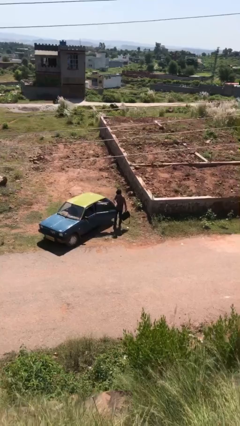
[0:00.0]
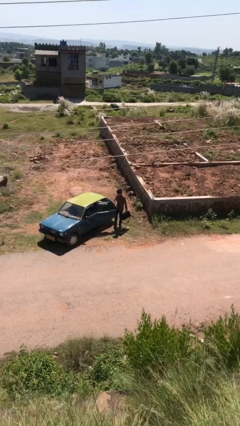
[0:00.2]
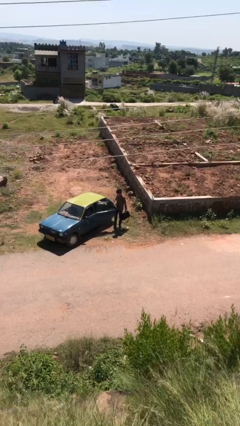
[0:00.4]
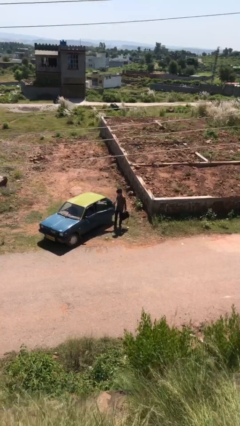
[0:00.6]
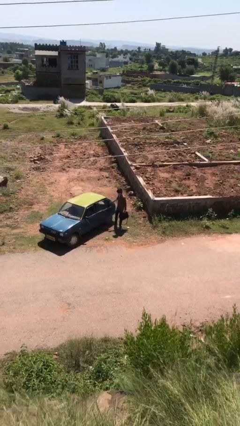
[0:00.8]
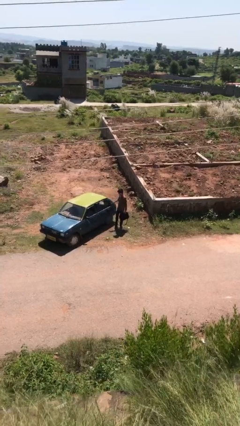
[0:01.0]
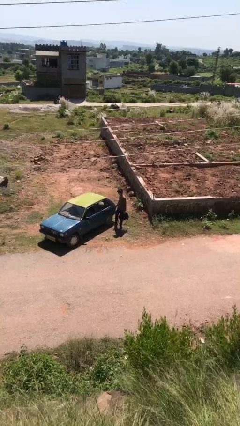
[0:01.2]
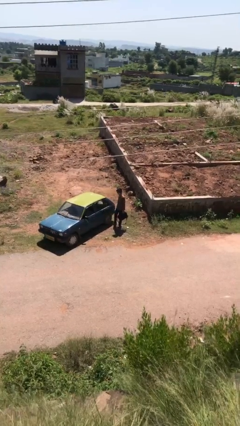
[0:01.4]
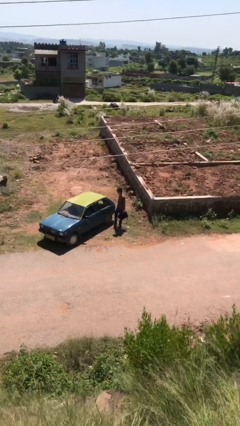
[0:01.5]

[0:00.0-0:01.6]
person closes car door

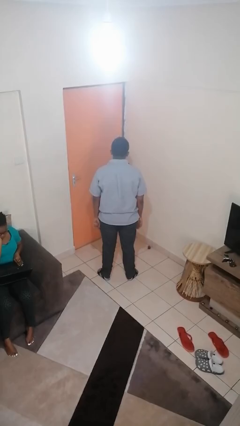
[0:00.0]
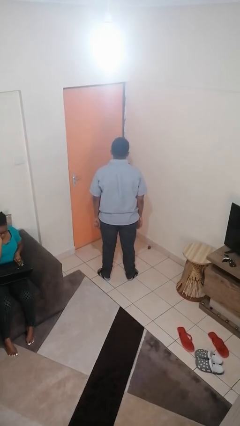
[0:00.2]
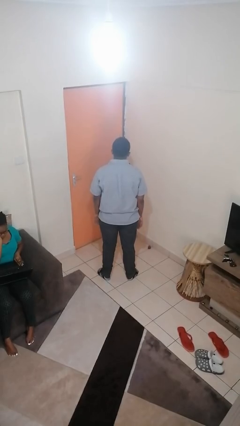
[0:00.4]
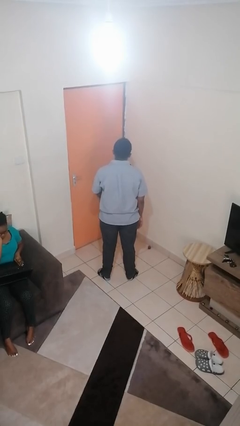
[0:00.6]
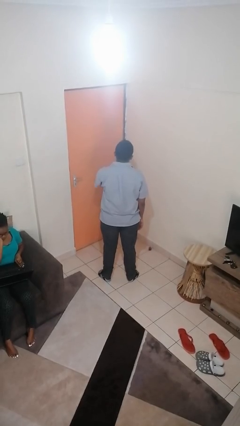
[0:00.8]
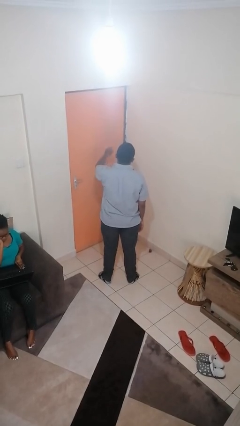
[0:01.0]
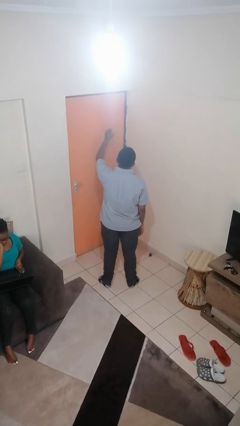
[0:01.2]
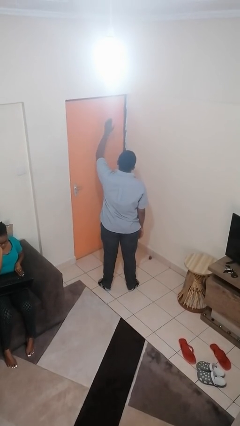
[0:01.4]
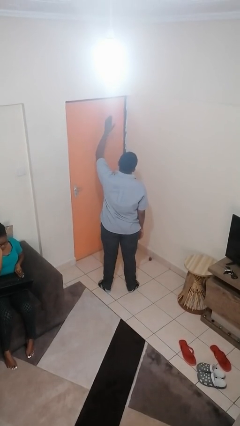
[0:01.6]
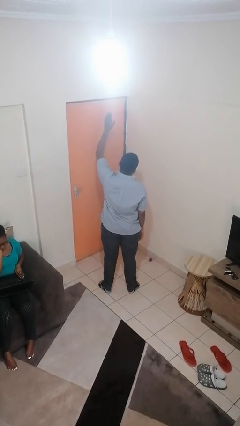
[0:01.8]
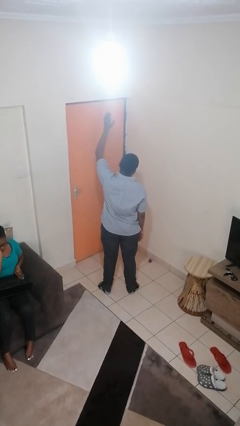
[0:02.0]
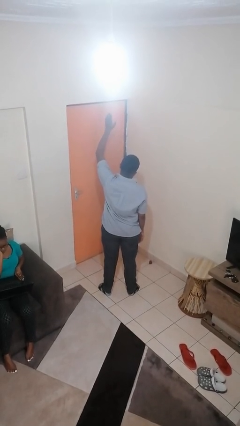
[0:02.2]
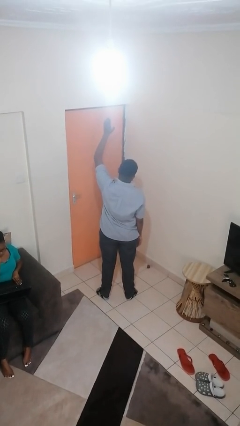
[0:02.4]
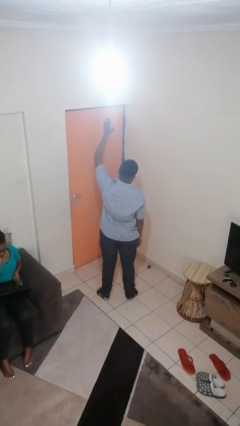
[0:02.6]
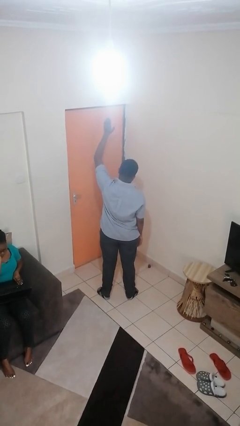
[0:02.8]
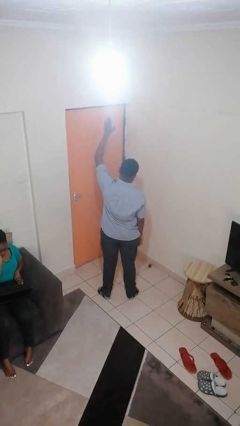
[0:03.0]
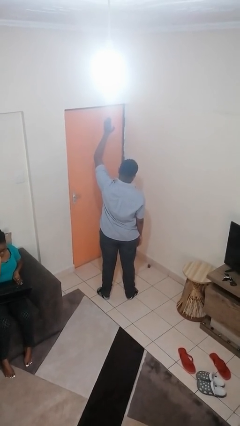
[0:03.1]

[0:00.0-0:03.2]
person gestures raise hand

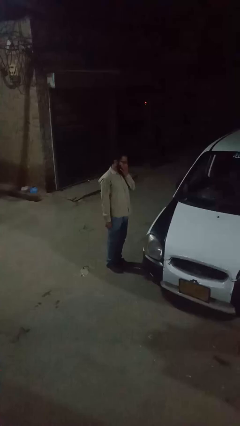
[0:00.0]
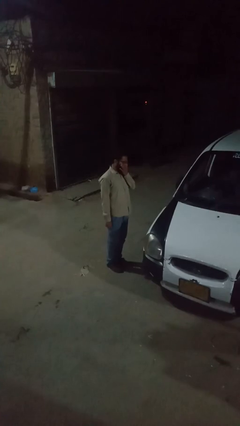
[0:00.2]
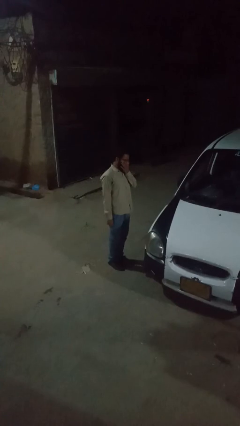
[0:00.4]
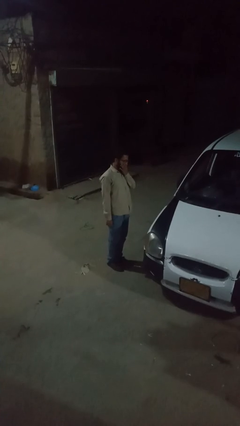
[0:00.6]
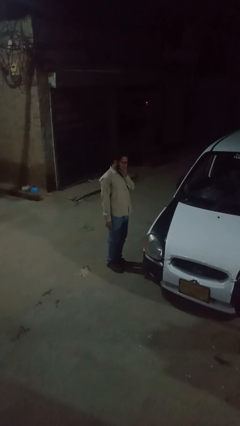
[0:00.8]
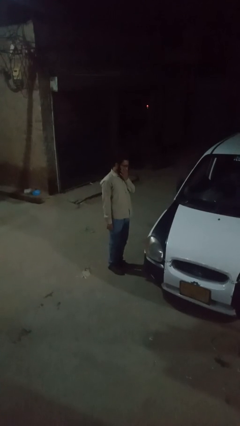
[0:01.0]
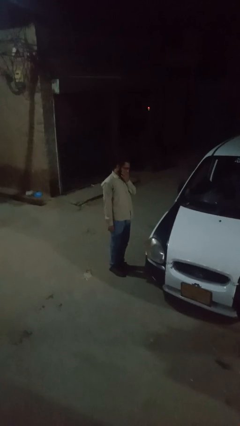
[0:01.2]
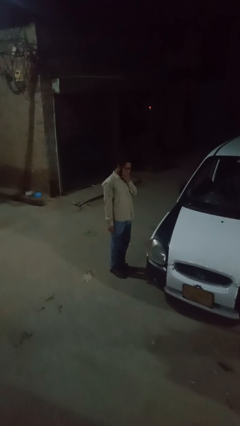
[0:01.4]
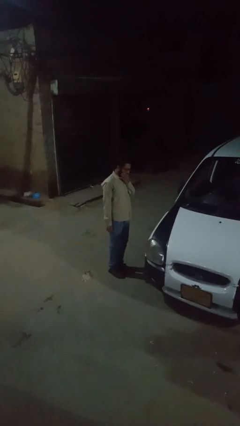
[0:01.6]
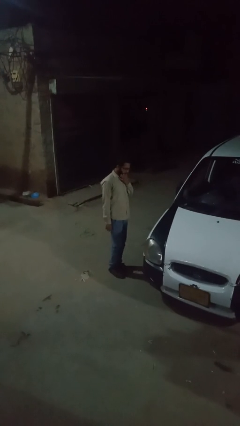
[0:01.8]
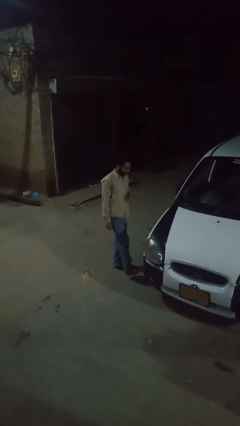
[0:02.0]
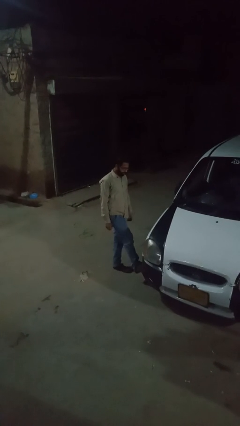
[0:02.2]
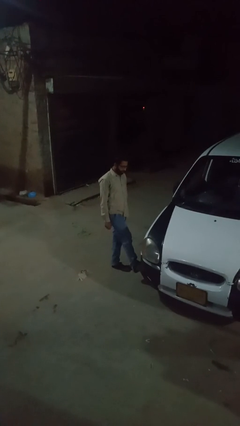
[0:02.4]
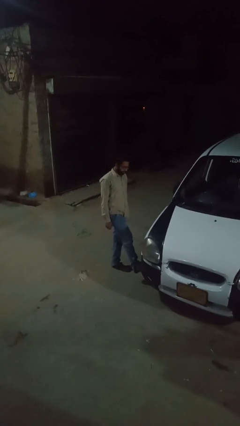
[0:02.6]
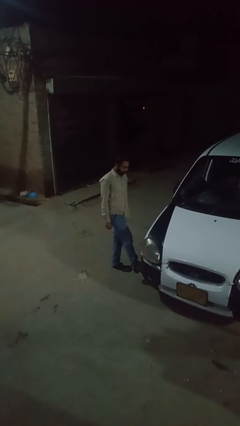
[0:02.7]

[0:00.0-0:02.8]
person kicks car tires

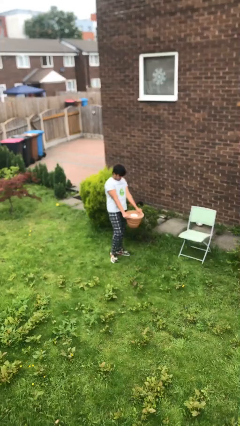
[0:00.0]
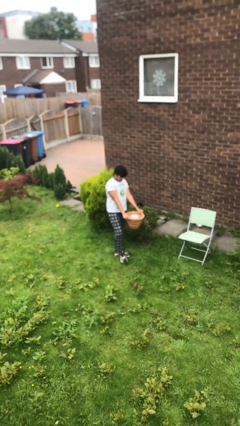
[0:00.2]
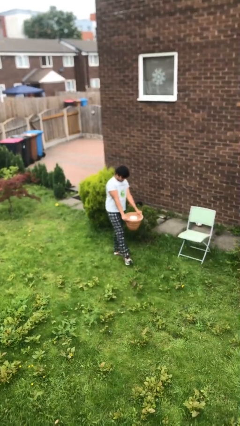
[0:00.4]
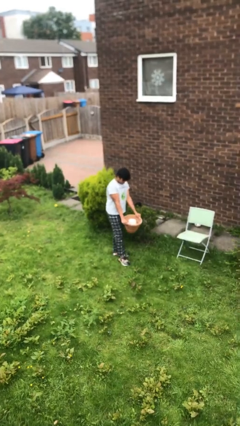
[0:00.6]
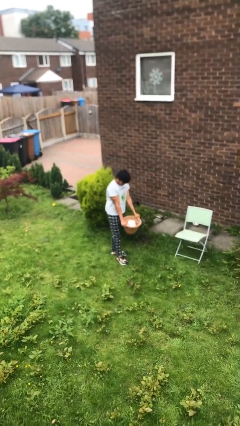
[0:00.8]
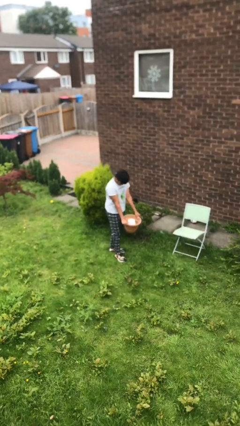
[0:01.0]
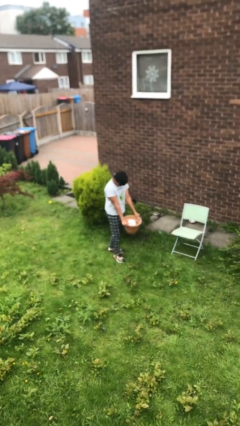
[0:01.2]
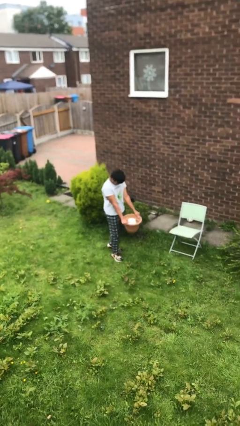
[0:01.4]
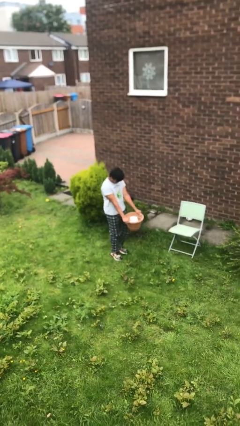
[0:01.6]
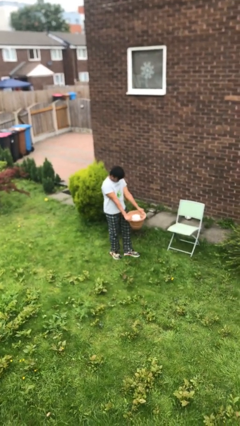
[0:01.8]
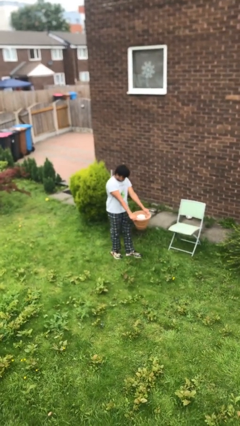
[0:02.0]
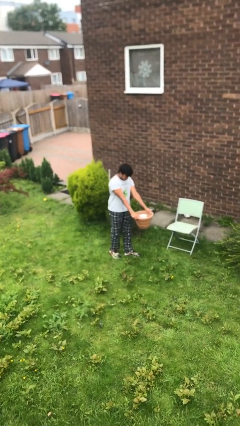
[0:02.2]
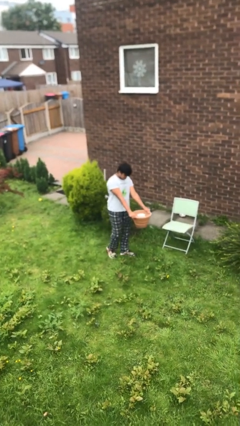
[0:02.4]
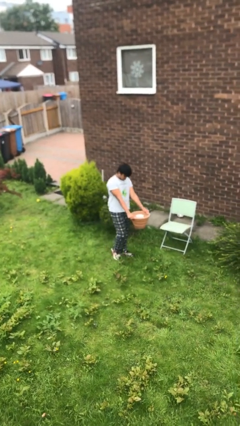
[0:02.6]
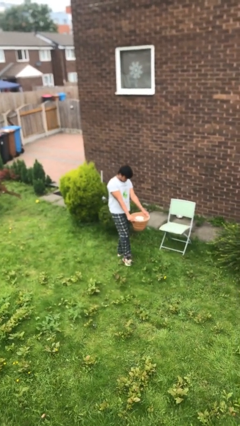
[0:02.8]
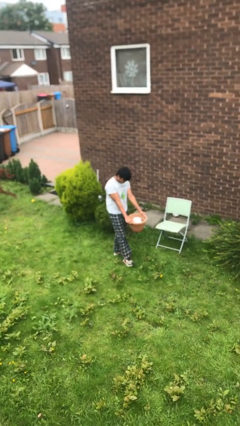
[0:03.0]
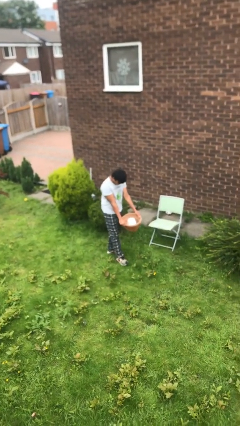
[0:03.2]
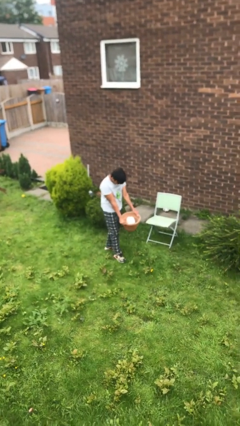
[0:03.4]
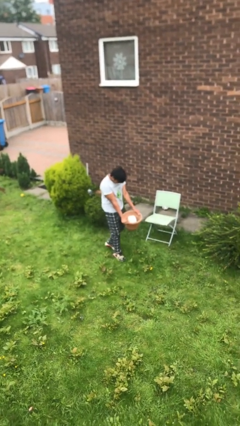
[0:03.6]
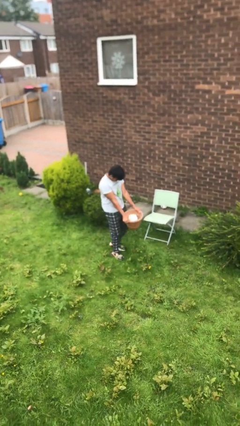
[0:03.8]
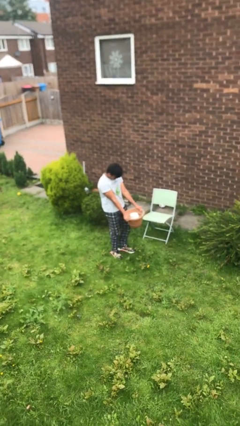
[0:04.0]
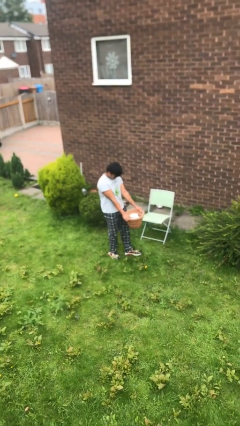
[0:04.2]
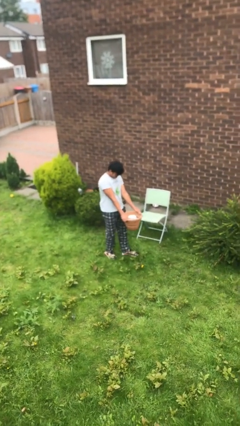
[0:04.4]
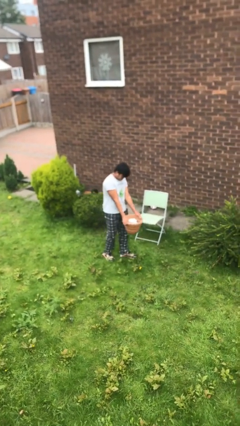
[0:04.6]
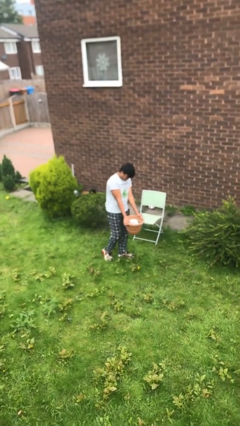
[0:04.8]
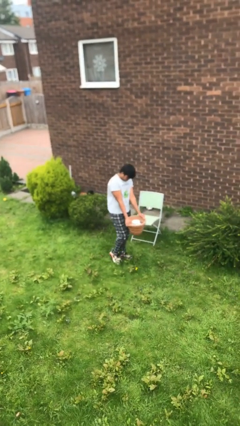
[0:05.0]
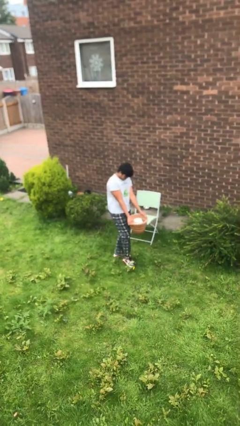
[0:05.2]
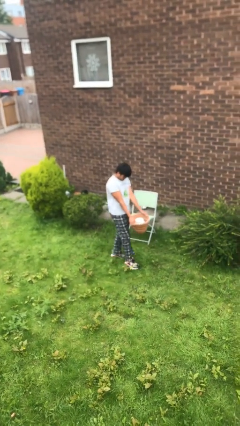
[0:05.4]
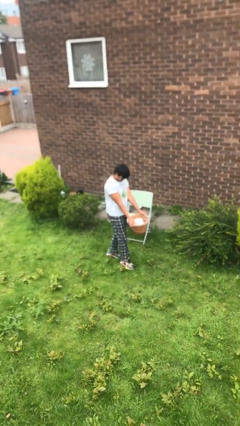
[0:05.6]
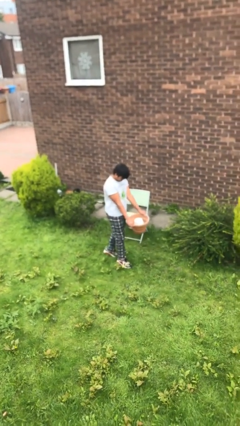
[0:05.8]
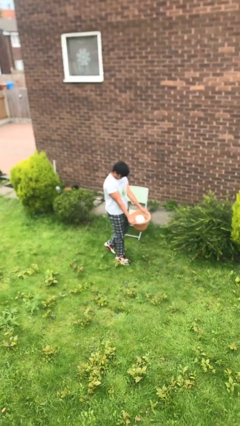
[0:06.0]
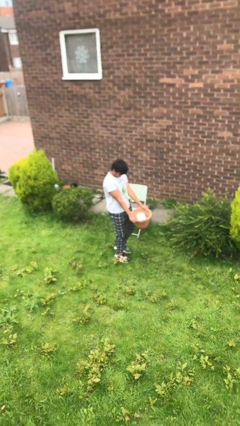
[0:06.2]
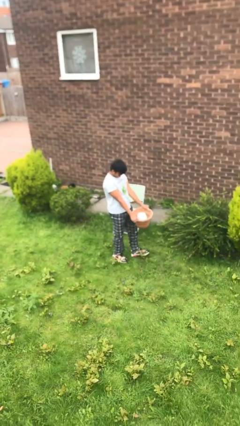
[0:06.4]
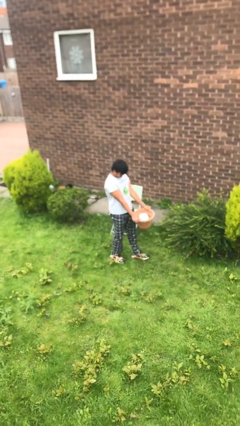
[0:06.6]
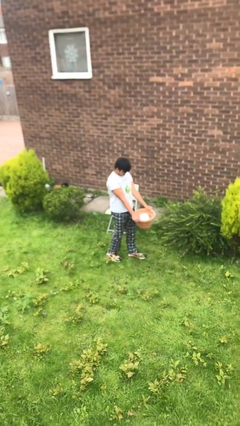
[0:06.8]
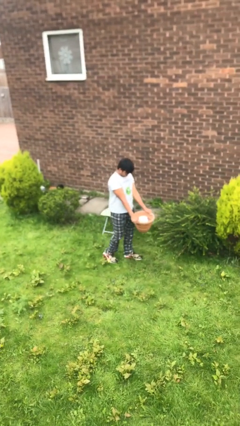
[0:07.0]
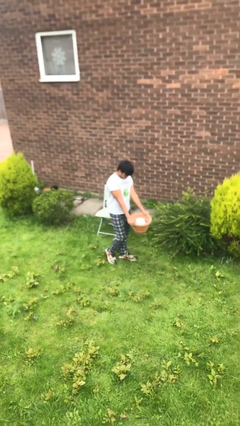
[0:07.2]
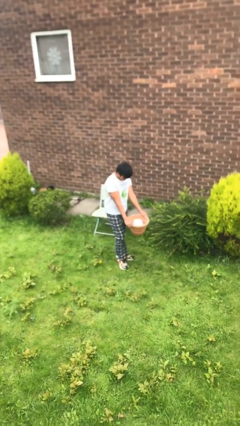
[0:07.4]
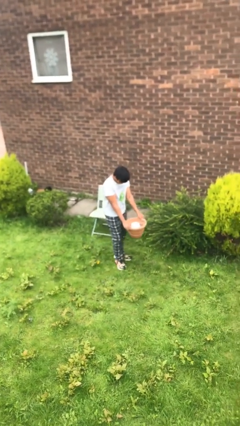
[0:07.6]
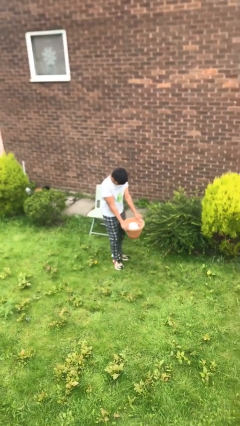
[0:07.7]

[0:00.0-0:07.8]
person carries heavy object

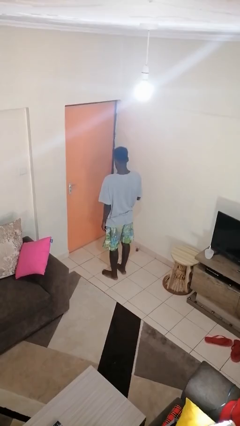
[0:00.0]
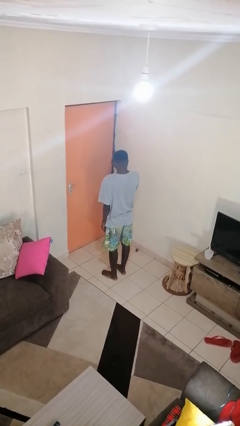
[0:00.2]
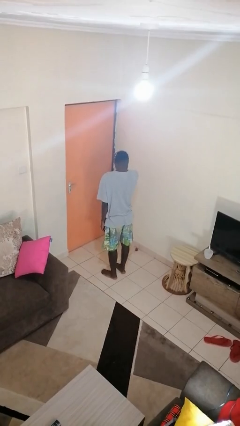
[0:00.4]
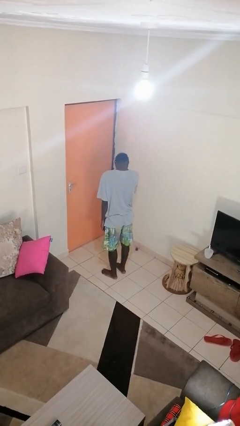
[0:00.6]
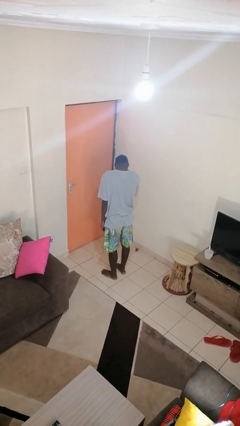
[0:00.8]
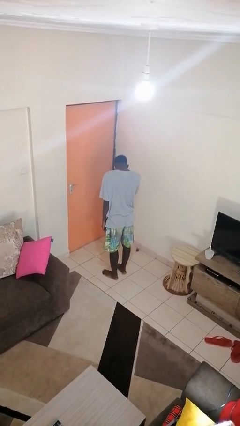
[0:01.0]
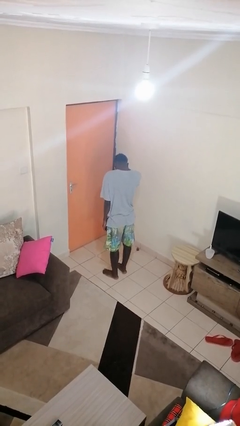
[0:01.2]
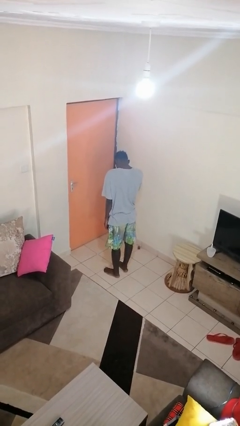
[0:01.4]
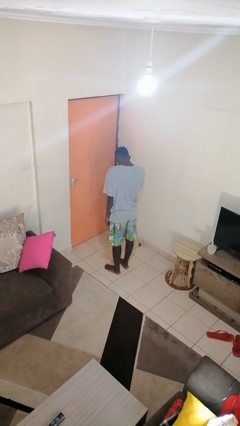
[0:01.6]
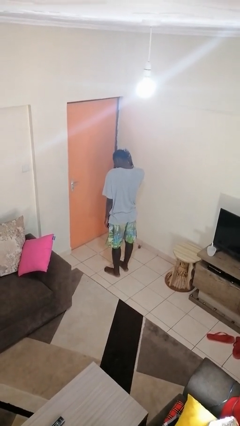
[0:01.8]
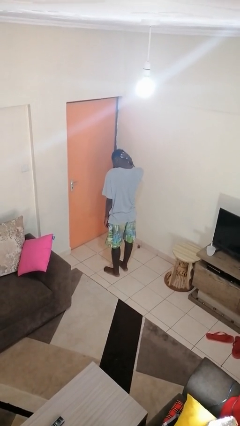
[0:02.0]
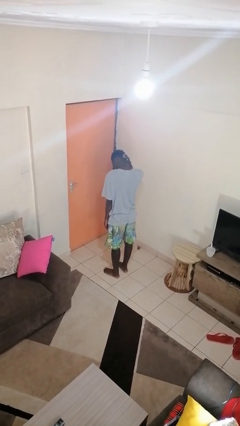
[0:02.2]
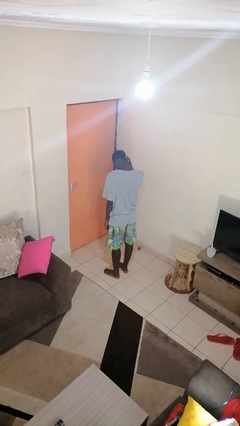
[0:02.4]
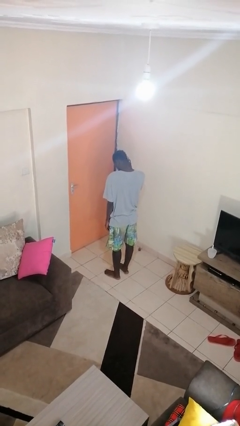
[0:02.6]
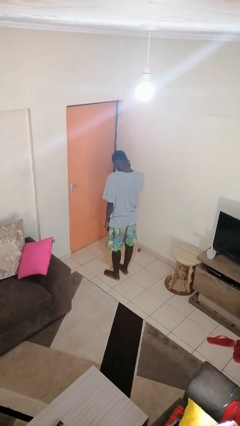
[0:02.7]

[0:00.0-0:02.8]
person strokes hair
